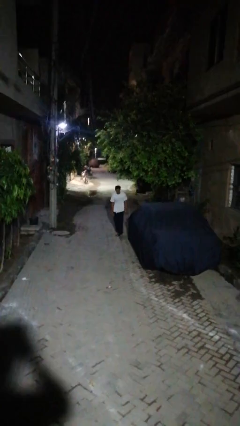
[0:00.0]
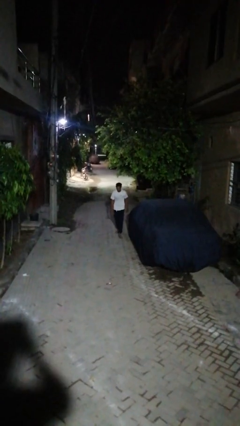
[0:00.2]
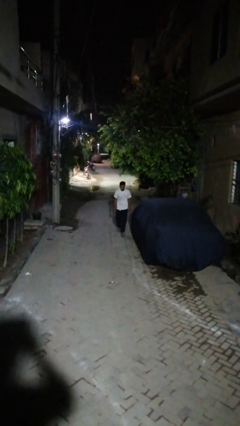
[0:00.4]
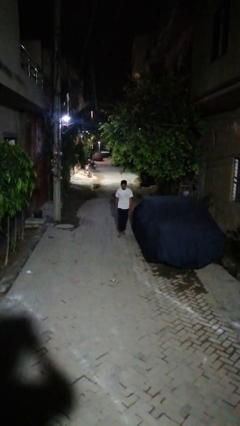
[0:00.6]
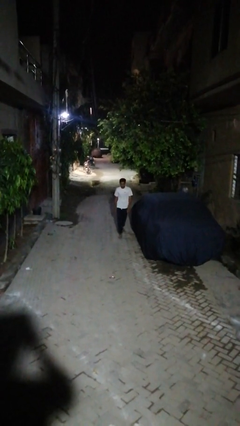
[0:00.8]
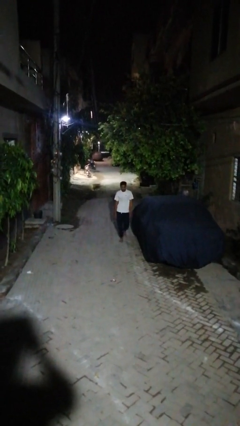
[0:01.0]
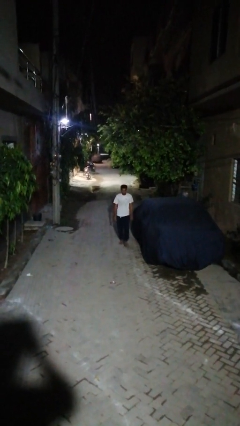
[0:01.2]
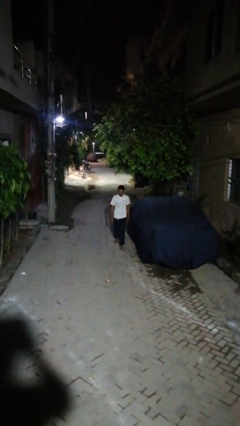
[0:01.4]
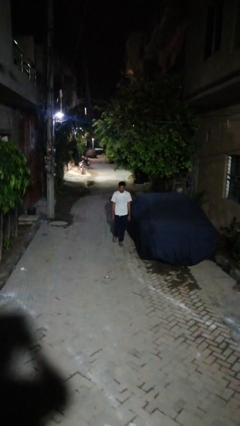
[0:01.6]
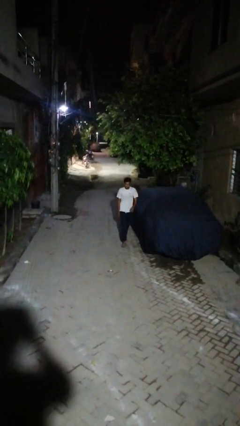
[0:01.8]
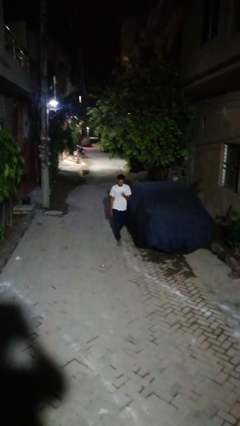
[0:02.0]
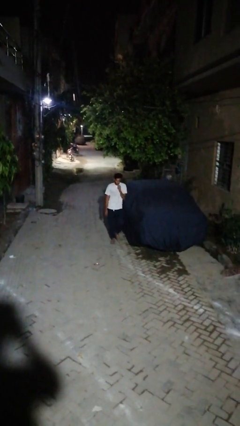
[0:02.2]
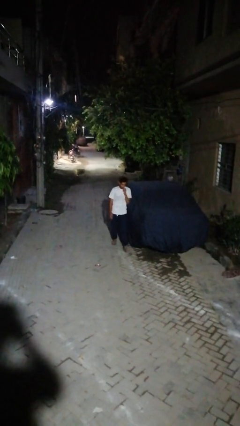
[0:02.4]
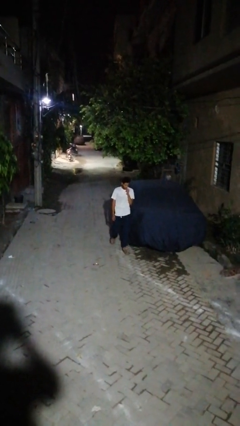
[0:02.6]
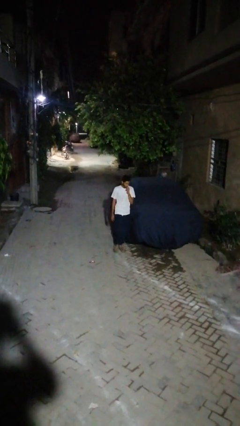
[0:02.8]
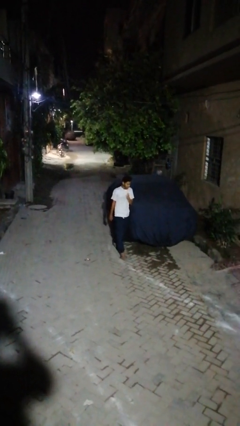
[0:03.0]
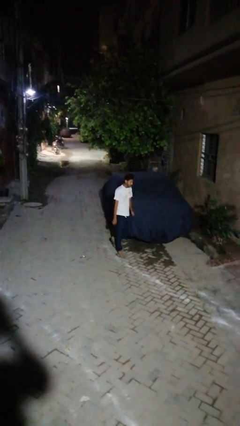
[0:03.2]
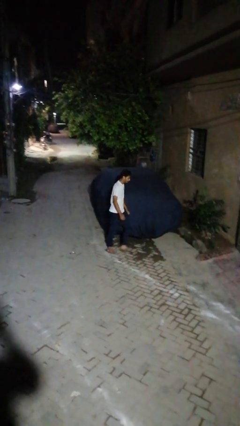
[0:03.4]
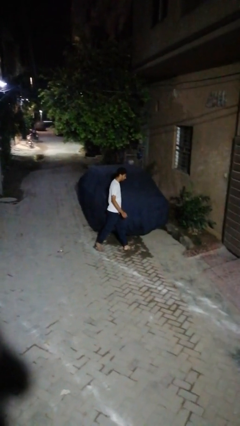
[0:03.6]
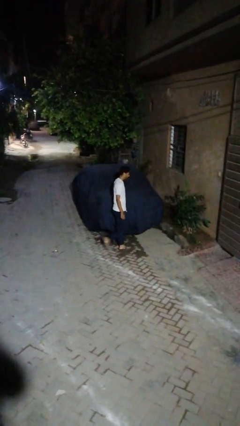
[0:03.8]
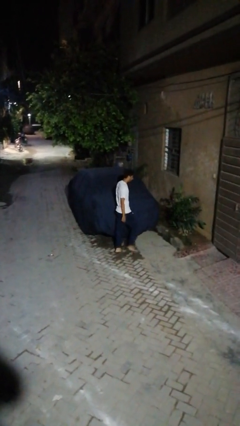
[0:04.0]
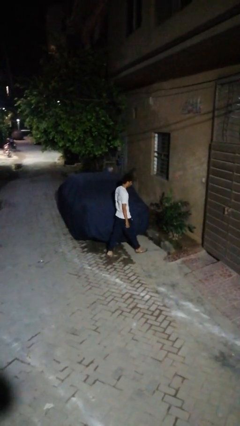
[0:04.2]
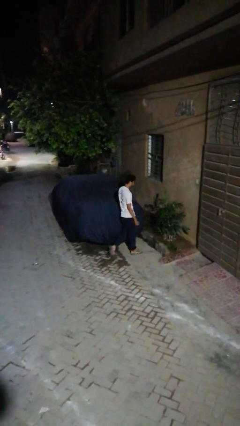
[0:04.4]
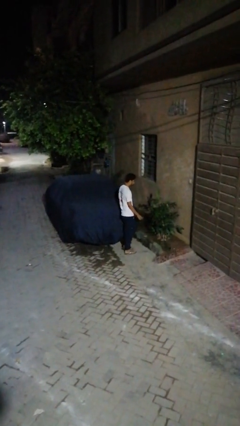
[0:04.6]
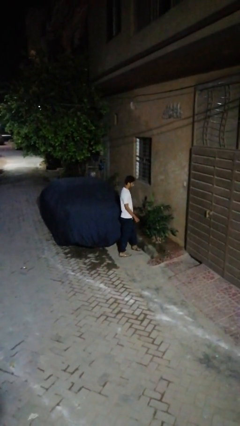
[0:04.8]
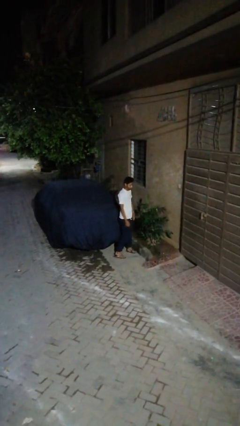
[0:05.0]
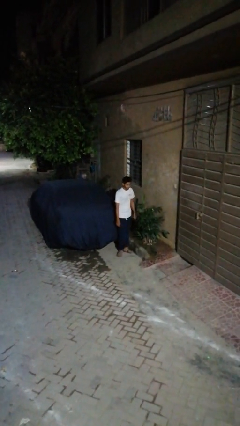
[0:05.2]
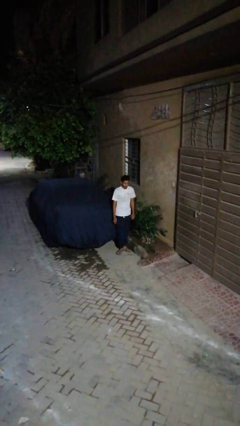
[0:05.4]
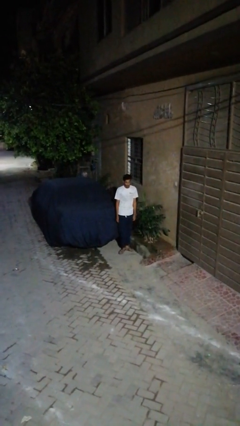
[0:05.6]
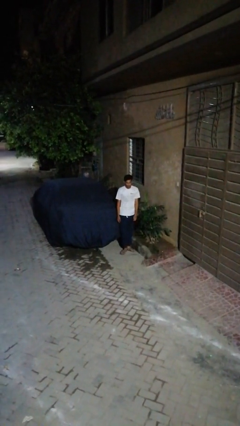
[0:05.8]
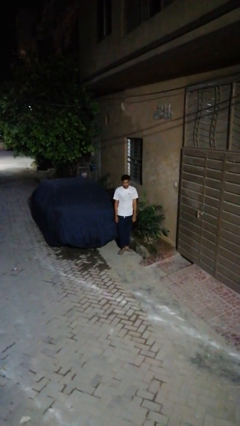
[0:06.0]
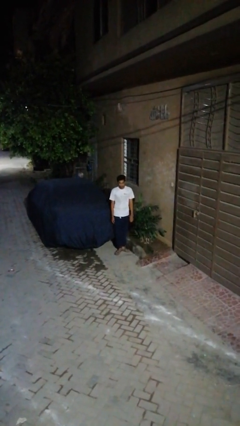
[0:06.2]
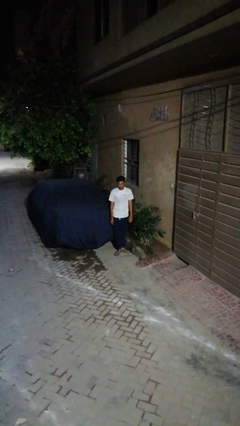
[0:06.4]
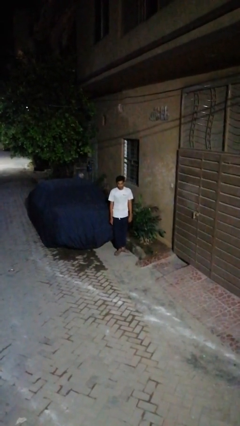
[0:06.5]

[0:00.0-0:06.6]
person walks around car

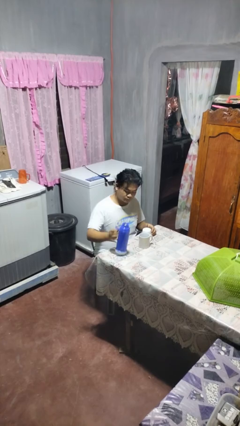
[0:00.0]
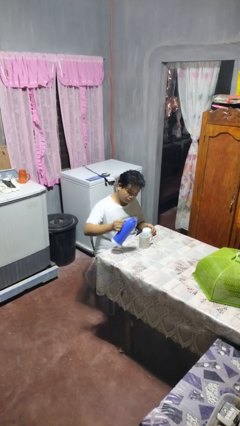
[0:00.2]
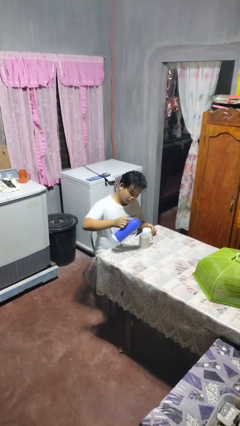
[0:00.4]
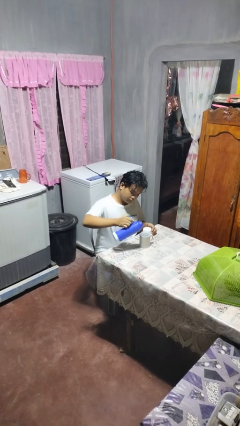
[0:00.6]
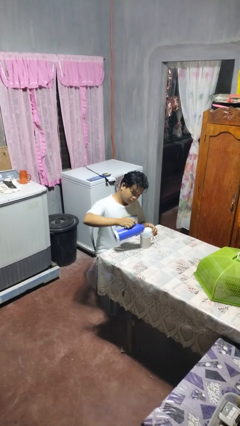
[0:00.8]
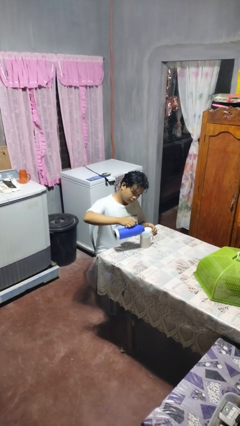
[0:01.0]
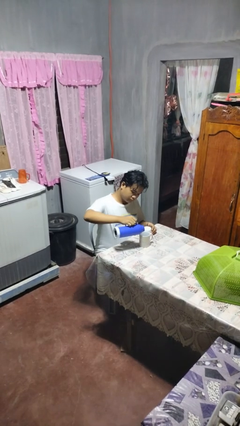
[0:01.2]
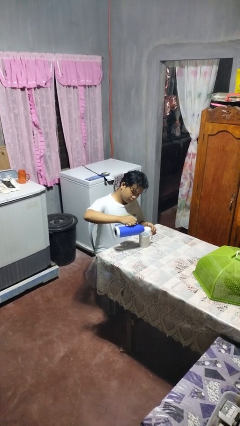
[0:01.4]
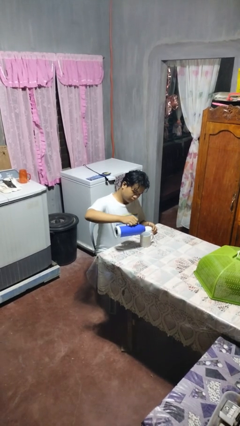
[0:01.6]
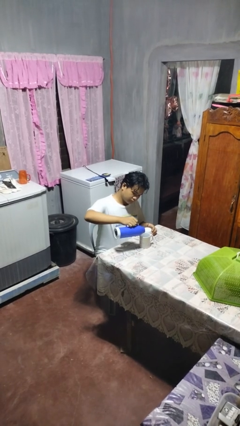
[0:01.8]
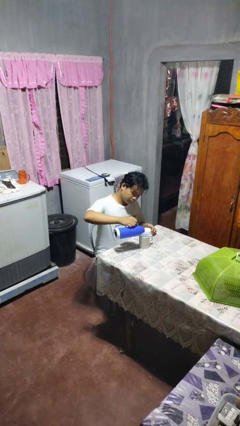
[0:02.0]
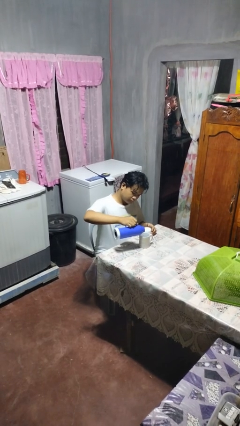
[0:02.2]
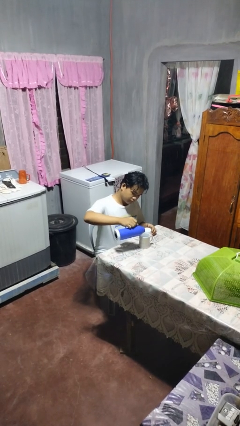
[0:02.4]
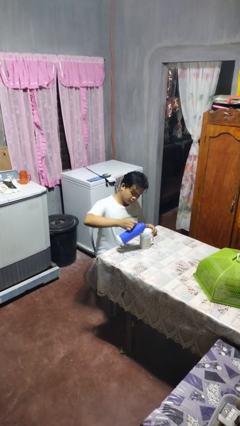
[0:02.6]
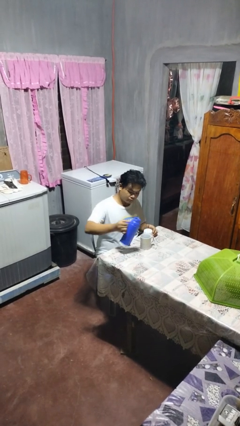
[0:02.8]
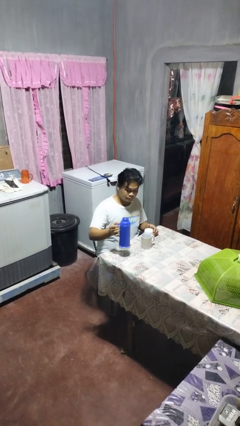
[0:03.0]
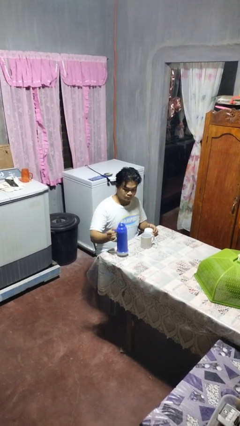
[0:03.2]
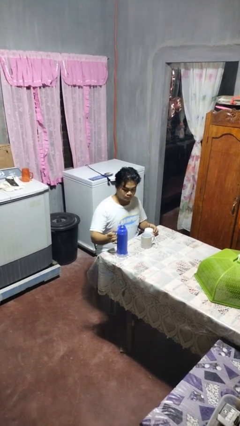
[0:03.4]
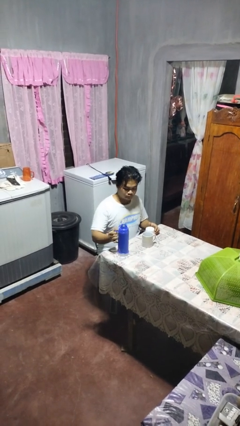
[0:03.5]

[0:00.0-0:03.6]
person pours coffee into mug

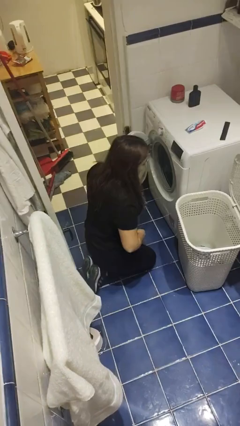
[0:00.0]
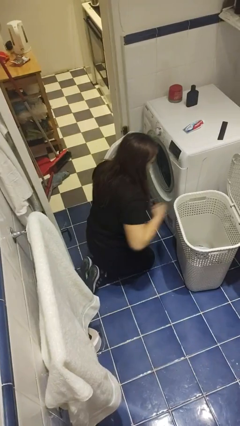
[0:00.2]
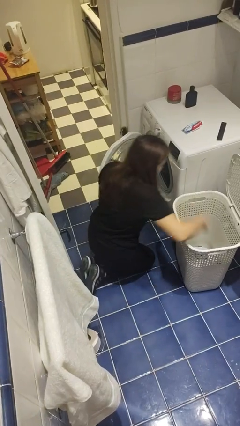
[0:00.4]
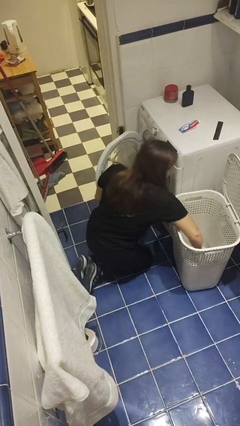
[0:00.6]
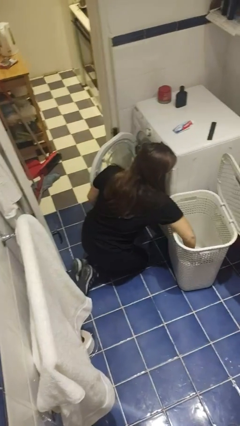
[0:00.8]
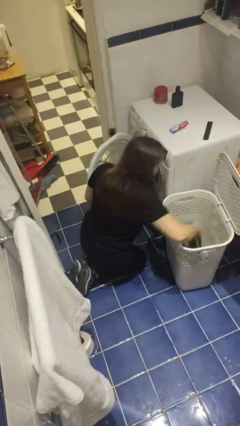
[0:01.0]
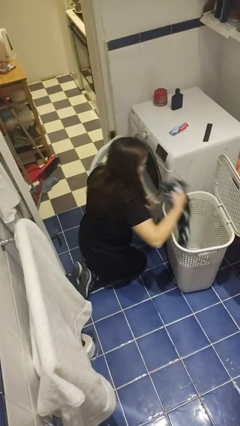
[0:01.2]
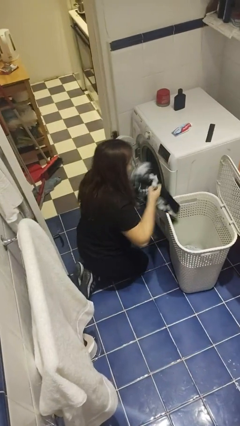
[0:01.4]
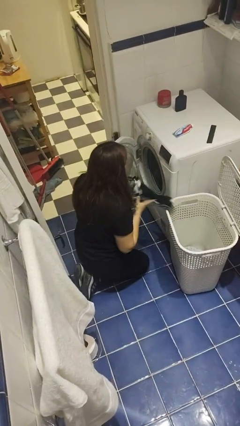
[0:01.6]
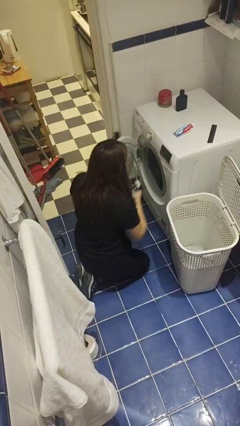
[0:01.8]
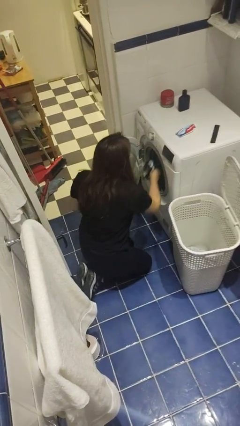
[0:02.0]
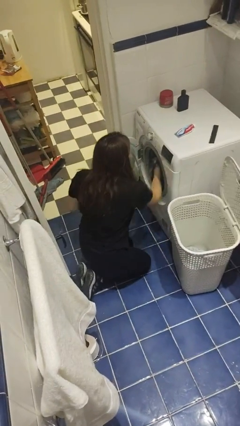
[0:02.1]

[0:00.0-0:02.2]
person unloads clotheswasher

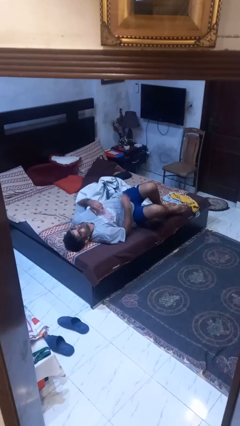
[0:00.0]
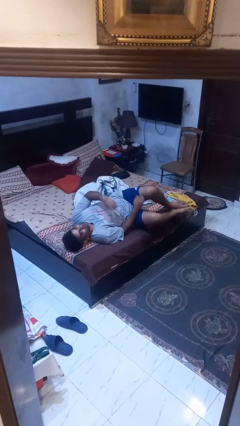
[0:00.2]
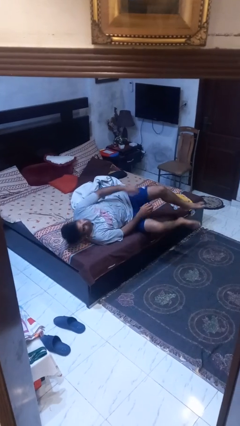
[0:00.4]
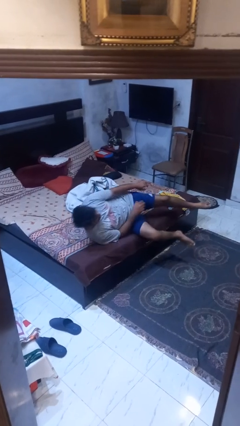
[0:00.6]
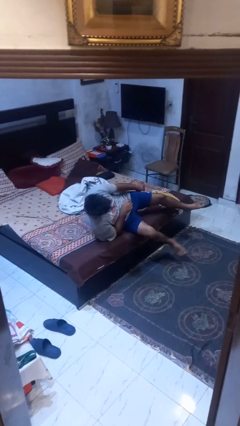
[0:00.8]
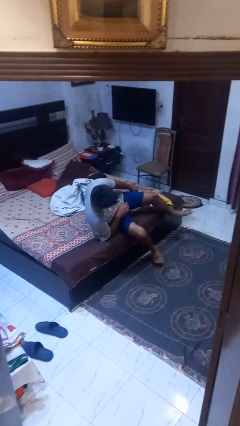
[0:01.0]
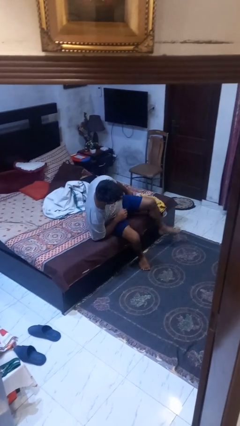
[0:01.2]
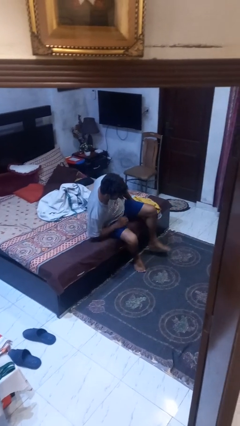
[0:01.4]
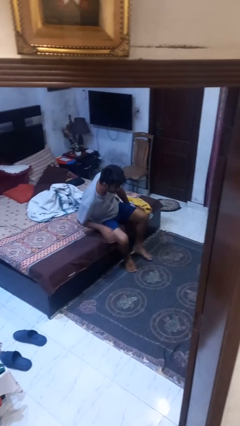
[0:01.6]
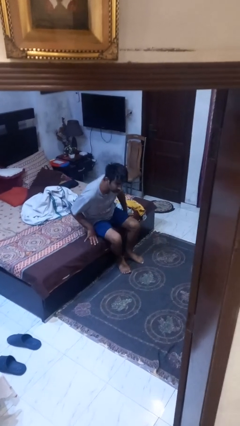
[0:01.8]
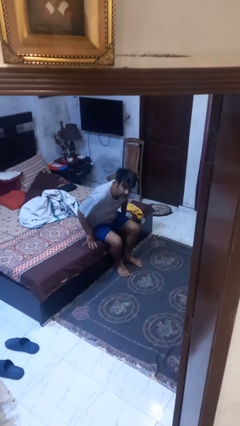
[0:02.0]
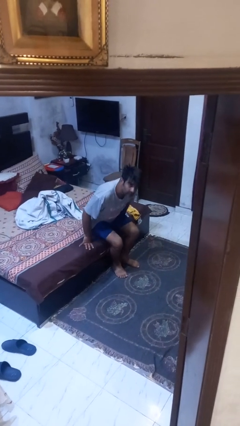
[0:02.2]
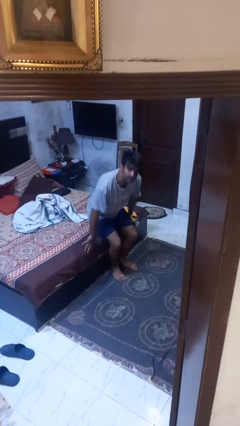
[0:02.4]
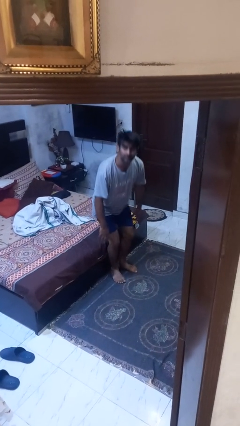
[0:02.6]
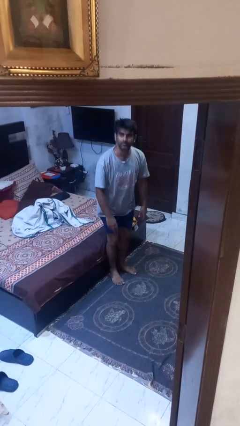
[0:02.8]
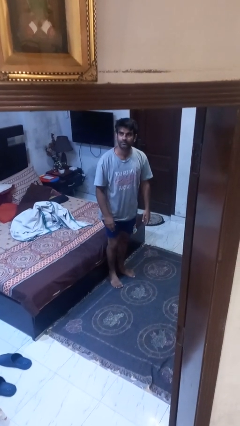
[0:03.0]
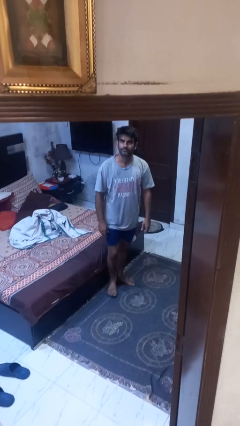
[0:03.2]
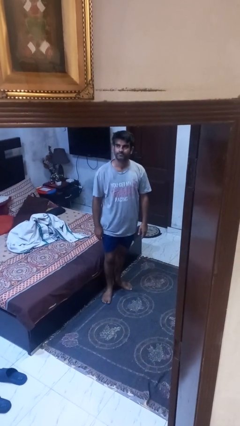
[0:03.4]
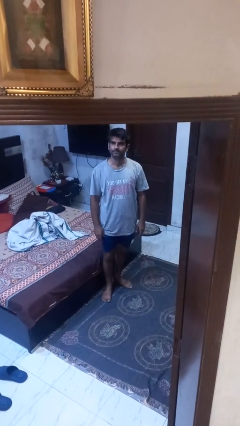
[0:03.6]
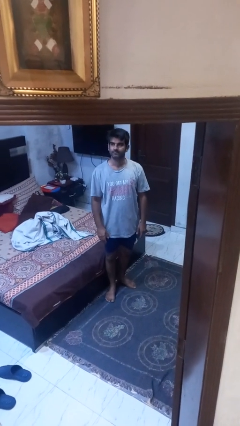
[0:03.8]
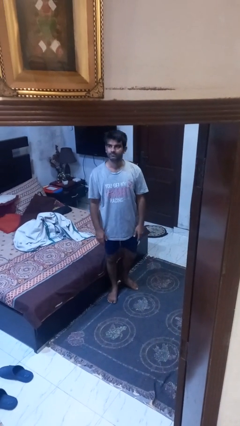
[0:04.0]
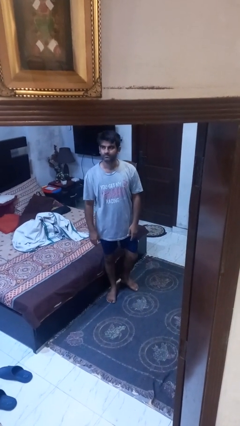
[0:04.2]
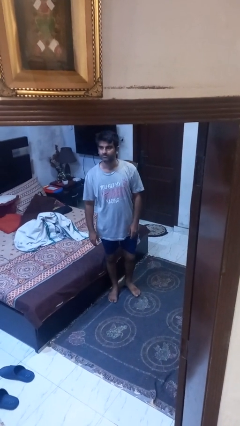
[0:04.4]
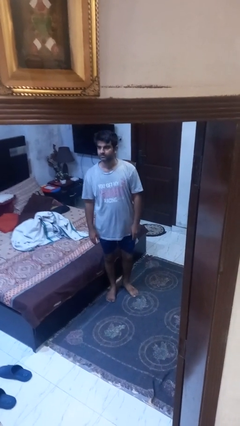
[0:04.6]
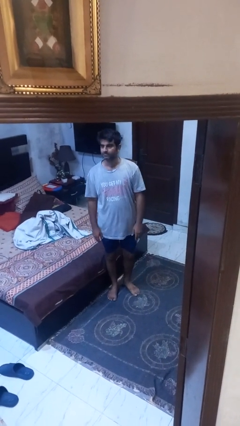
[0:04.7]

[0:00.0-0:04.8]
person stands up

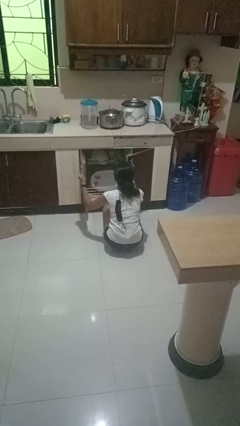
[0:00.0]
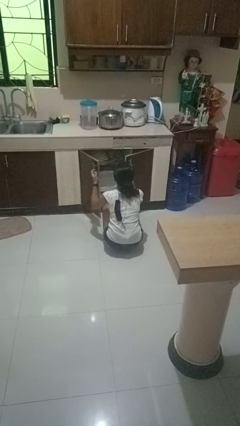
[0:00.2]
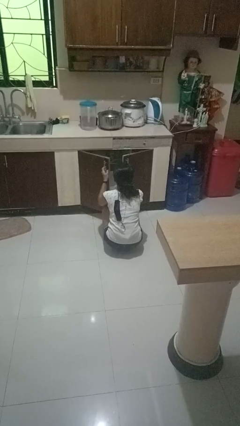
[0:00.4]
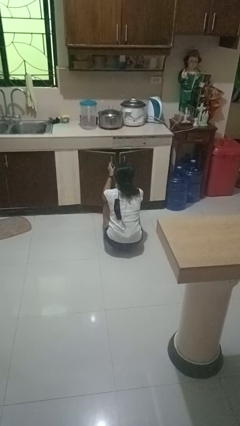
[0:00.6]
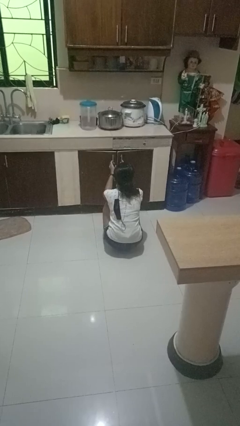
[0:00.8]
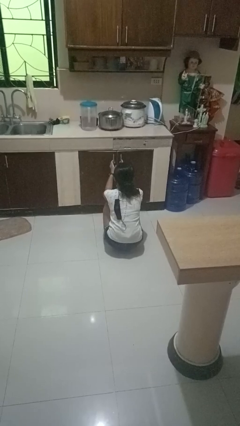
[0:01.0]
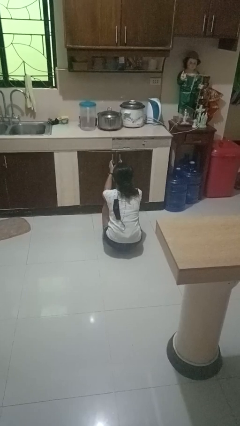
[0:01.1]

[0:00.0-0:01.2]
person closes dishwasher
